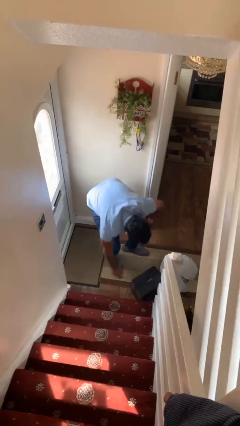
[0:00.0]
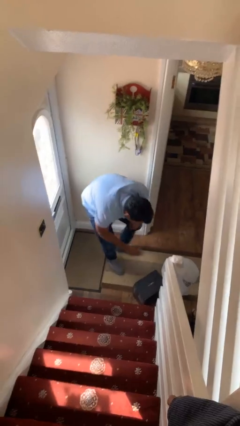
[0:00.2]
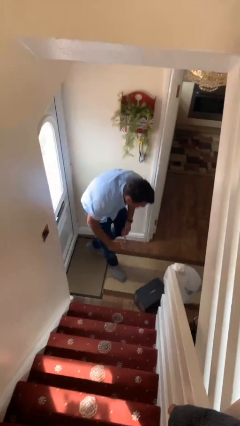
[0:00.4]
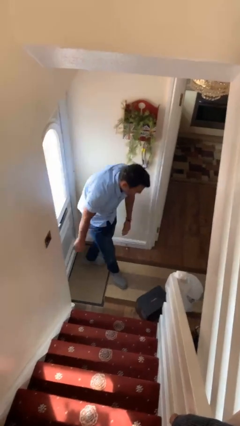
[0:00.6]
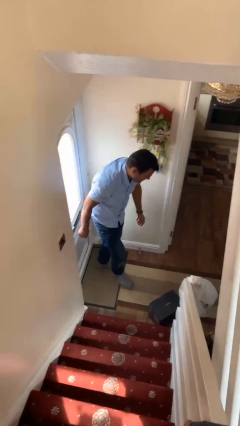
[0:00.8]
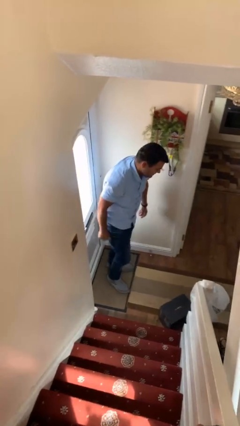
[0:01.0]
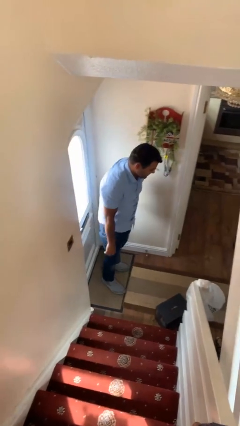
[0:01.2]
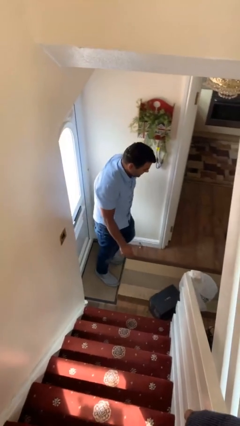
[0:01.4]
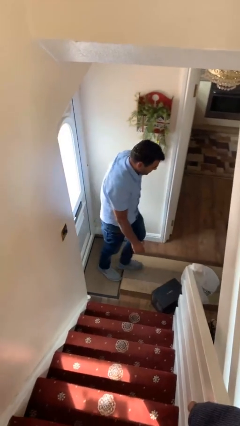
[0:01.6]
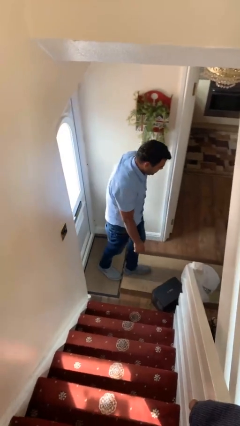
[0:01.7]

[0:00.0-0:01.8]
person stands up from floor

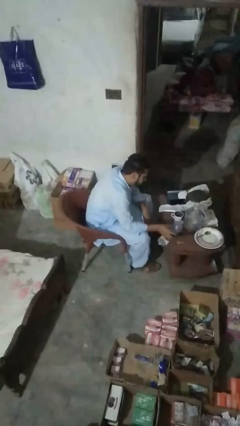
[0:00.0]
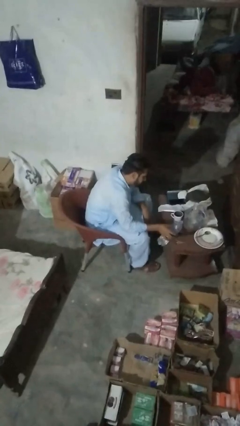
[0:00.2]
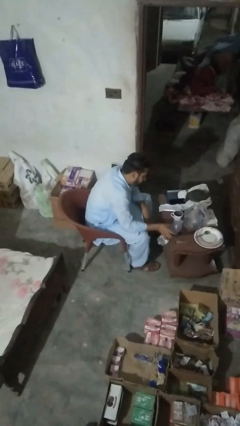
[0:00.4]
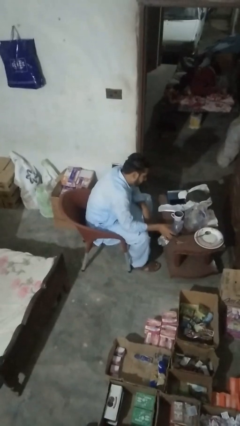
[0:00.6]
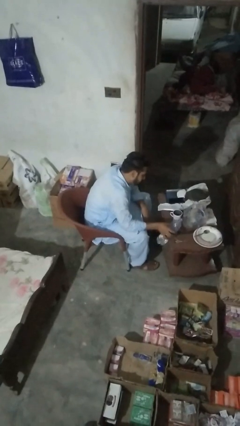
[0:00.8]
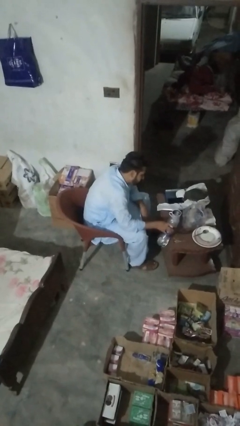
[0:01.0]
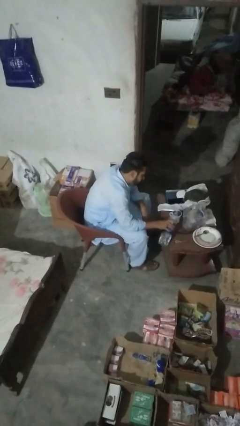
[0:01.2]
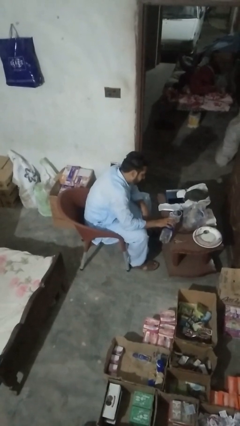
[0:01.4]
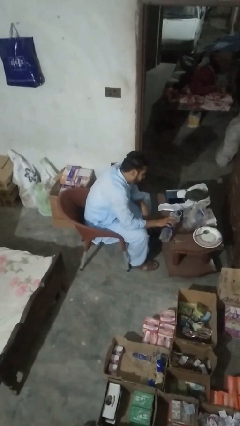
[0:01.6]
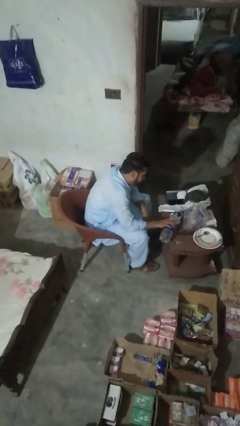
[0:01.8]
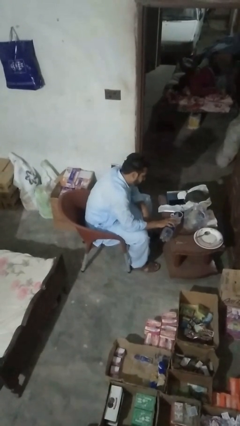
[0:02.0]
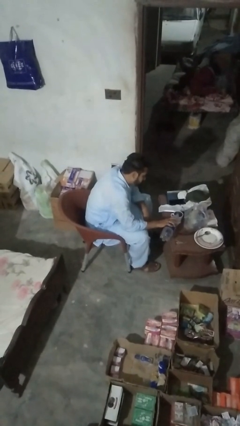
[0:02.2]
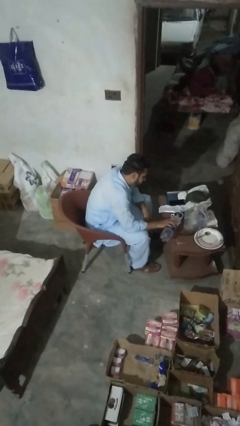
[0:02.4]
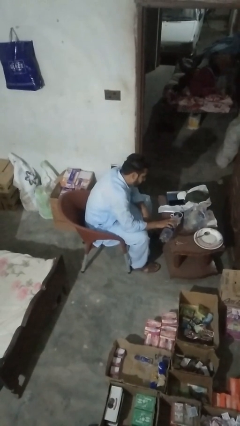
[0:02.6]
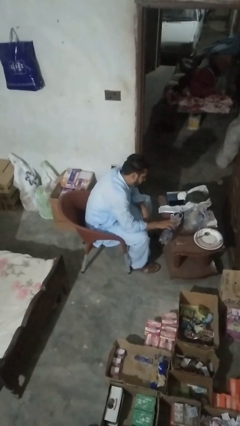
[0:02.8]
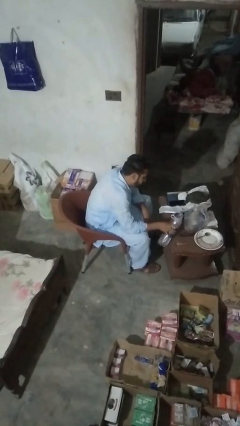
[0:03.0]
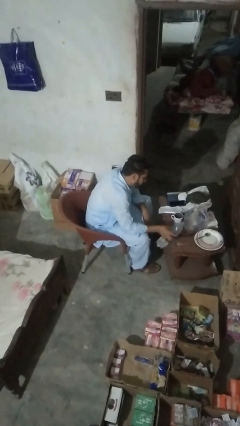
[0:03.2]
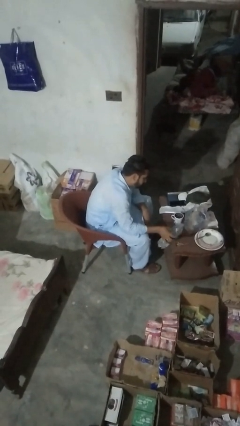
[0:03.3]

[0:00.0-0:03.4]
person pours liquid into cup

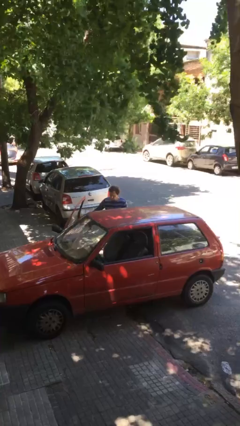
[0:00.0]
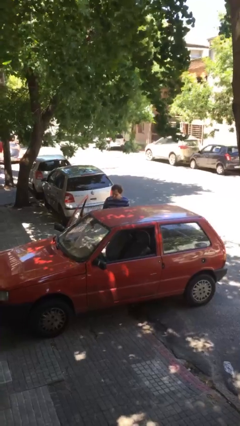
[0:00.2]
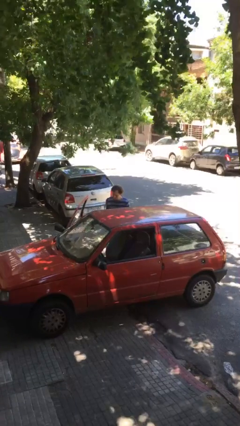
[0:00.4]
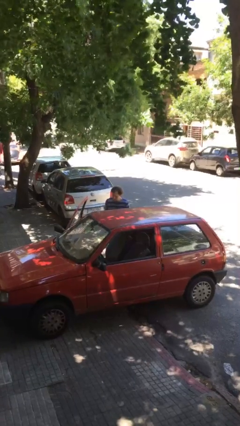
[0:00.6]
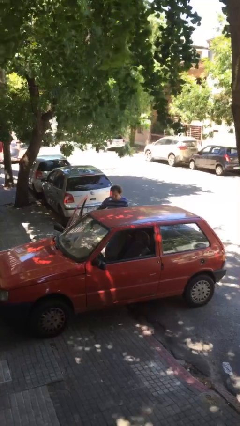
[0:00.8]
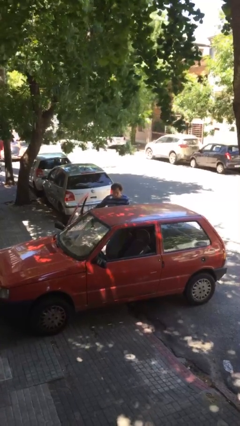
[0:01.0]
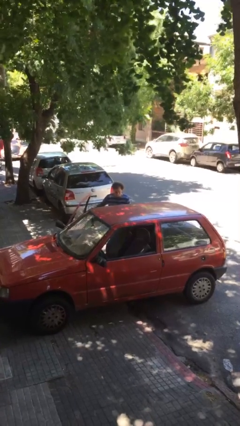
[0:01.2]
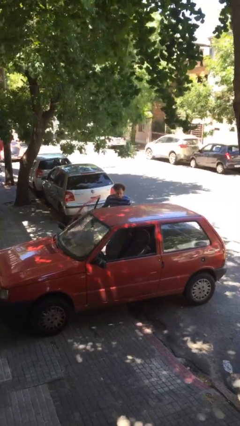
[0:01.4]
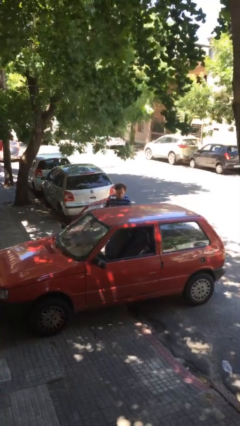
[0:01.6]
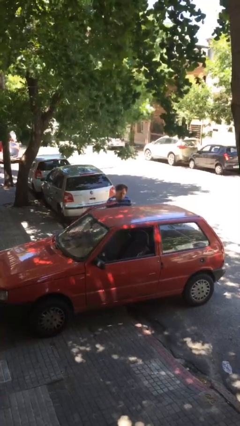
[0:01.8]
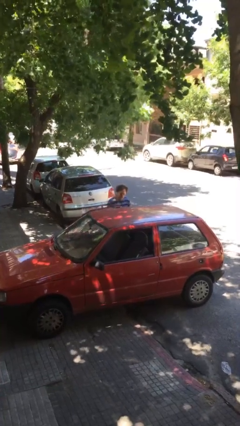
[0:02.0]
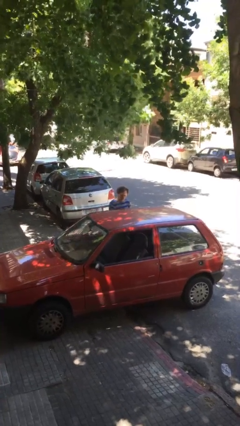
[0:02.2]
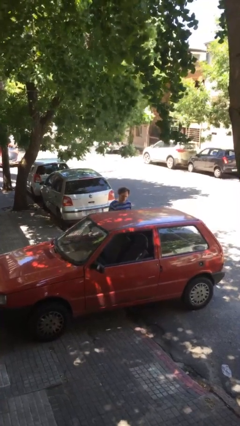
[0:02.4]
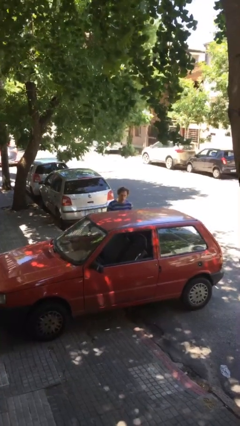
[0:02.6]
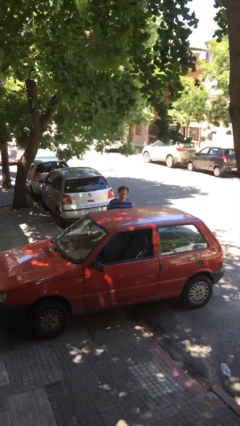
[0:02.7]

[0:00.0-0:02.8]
person closes car door

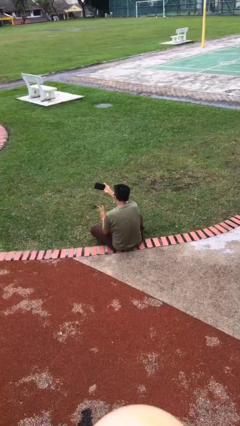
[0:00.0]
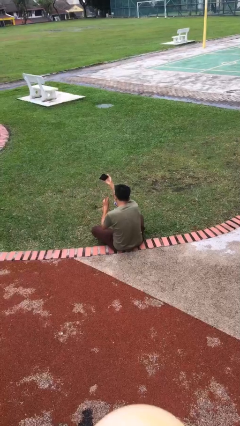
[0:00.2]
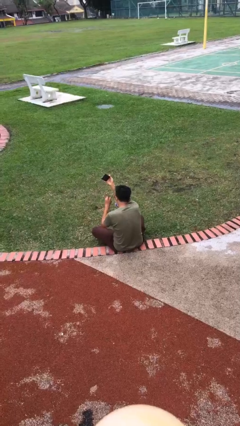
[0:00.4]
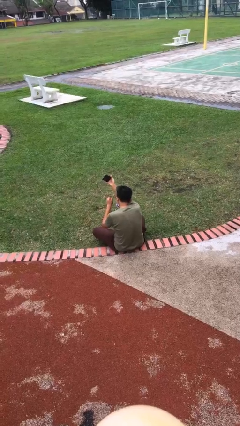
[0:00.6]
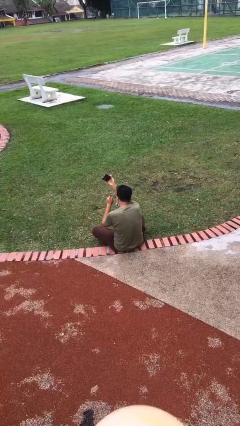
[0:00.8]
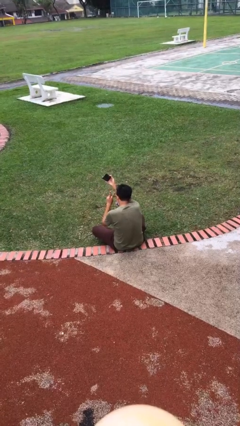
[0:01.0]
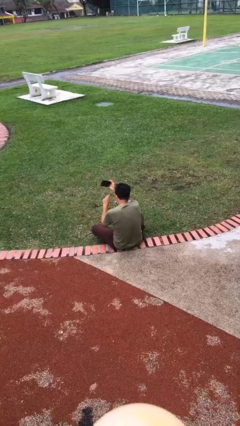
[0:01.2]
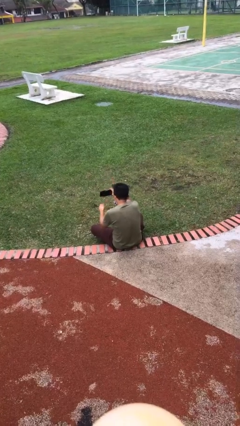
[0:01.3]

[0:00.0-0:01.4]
person takes selfie

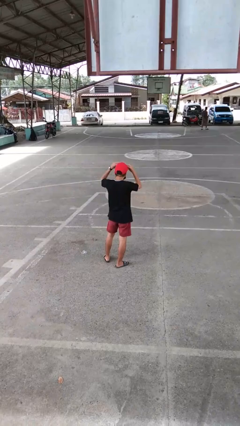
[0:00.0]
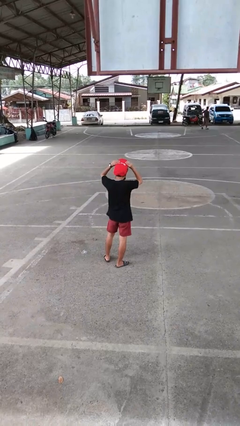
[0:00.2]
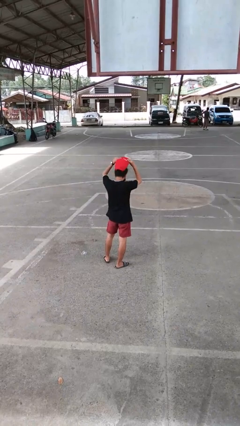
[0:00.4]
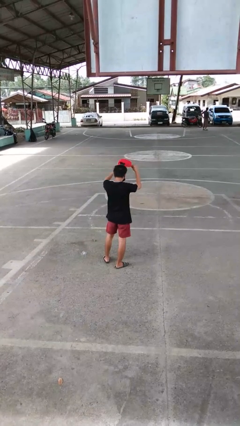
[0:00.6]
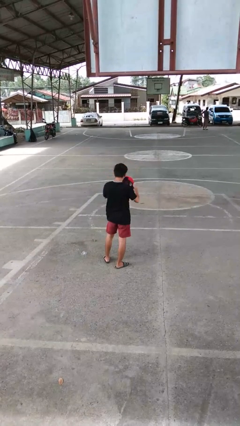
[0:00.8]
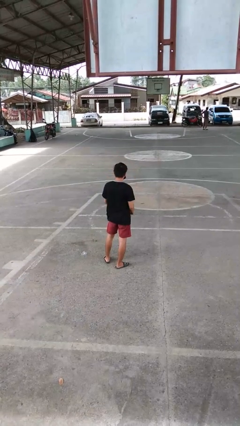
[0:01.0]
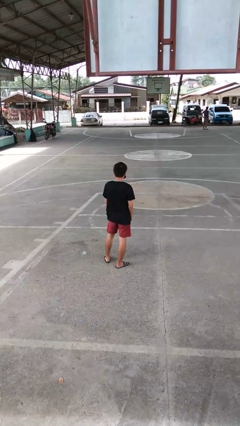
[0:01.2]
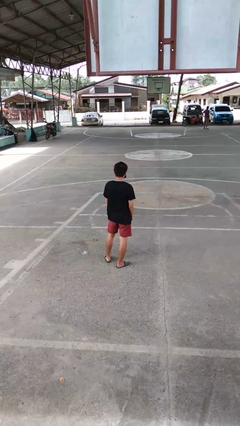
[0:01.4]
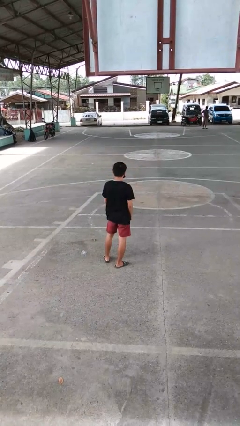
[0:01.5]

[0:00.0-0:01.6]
person takes off hat

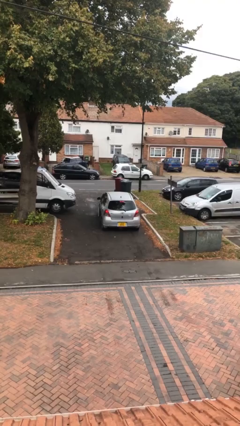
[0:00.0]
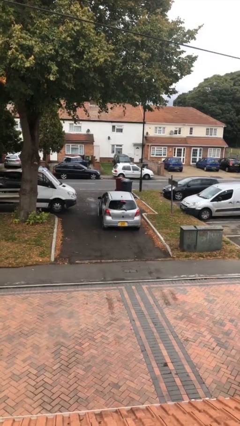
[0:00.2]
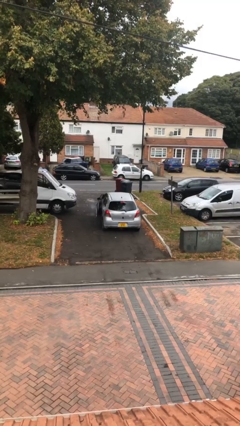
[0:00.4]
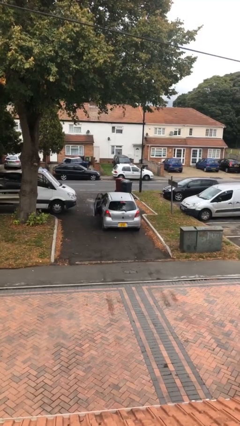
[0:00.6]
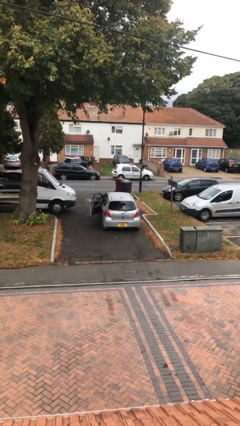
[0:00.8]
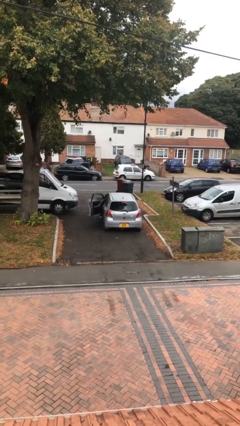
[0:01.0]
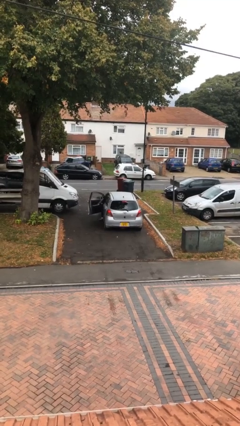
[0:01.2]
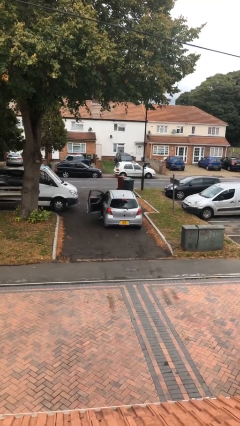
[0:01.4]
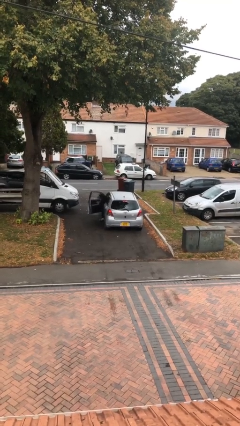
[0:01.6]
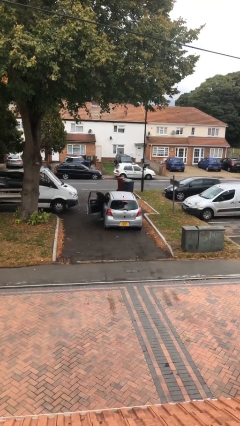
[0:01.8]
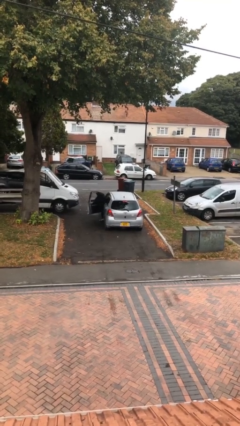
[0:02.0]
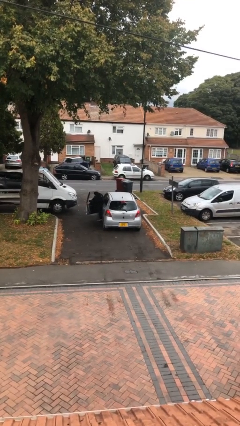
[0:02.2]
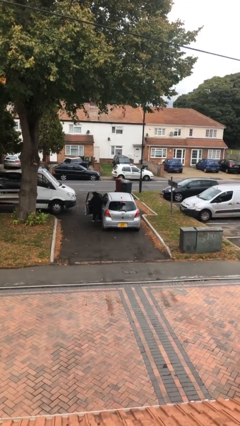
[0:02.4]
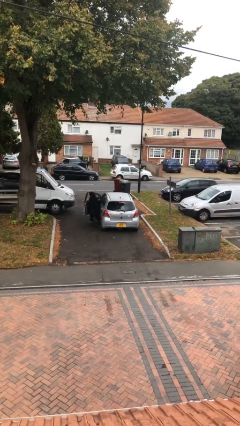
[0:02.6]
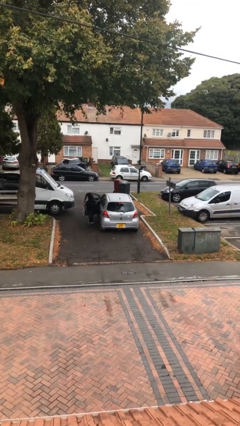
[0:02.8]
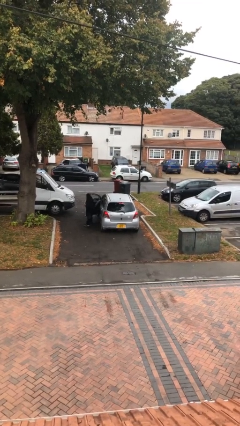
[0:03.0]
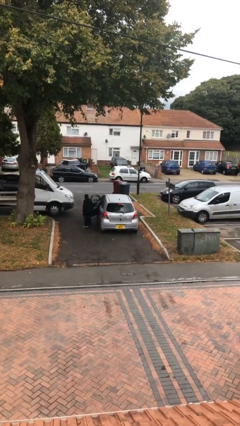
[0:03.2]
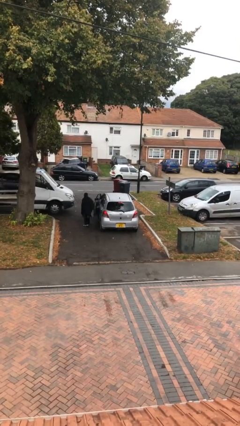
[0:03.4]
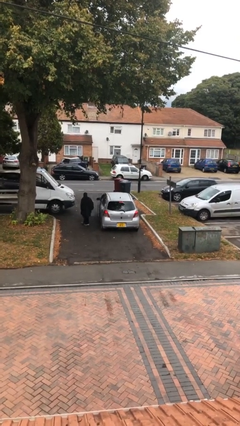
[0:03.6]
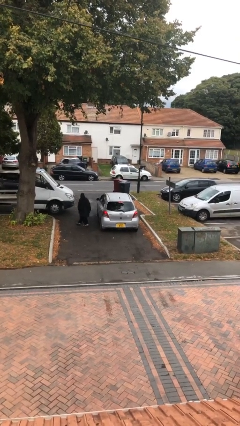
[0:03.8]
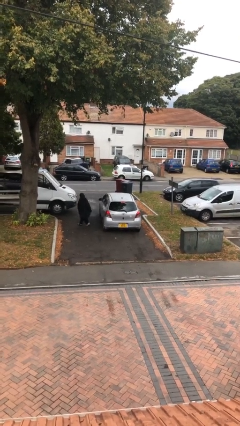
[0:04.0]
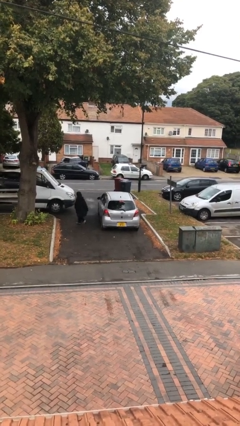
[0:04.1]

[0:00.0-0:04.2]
car drops off person

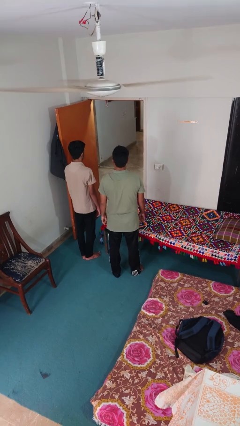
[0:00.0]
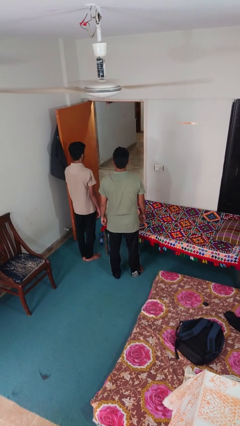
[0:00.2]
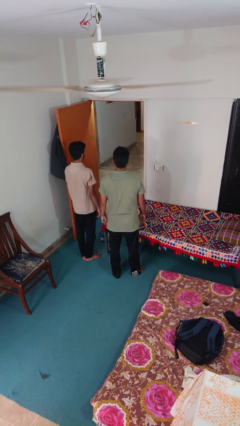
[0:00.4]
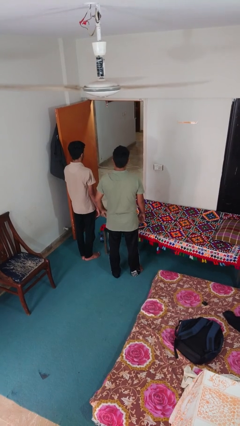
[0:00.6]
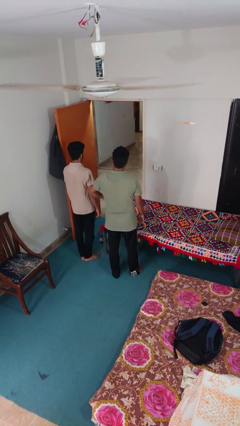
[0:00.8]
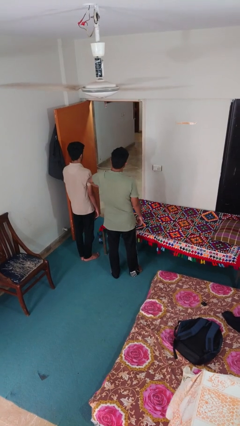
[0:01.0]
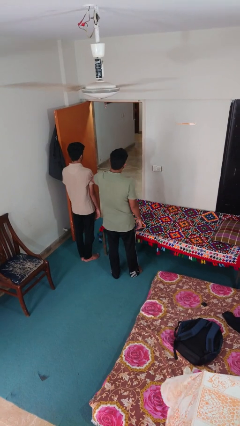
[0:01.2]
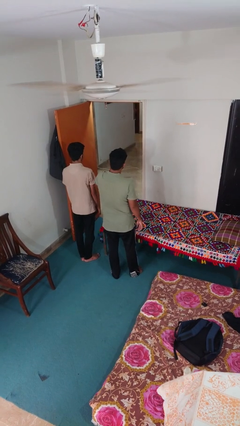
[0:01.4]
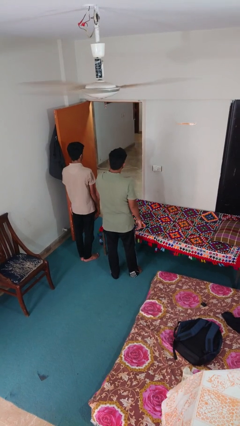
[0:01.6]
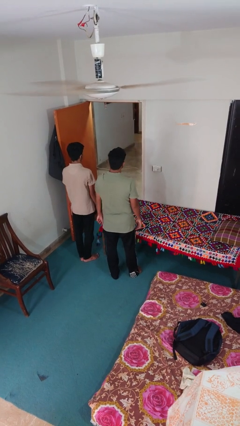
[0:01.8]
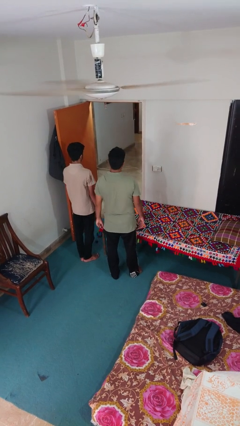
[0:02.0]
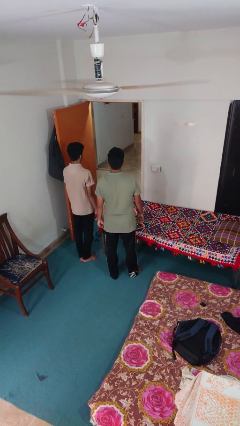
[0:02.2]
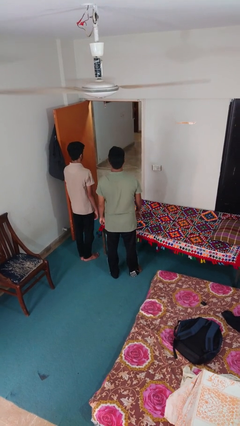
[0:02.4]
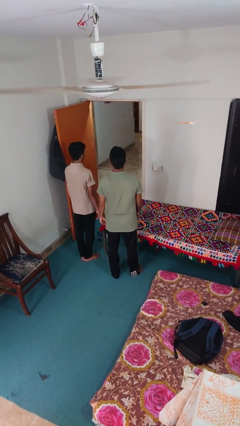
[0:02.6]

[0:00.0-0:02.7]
person nudges person with elbow
